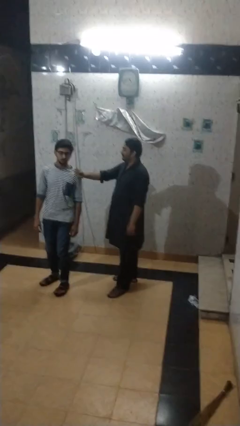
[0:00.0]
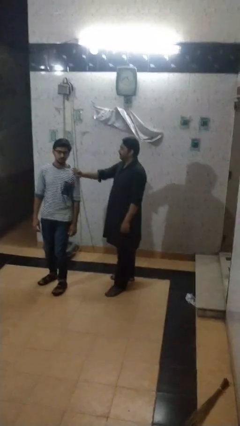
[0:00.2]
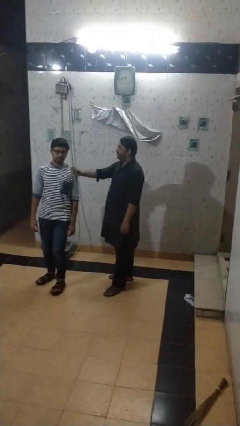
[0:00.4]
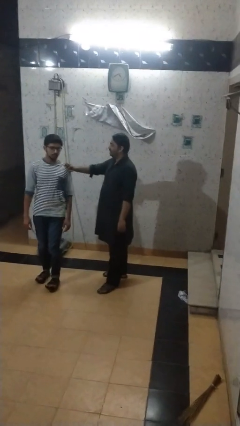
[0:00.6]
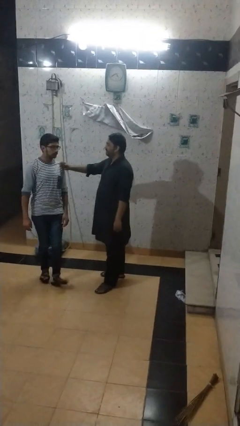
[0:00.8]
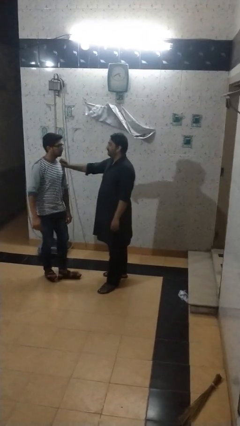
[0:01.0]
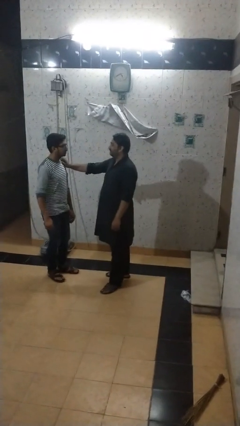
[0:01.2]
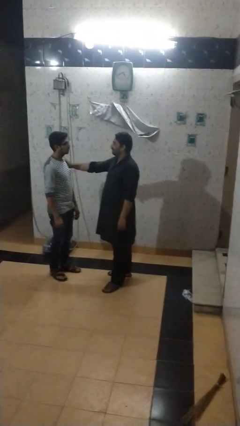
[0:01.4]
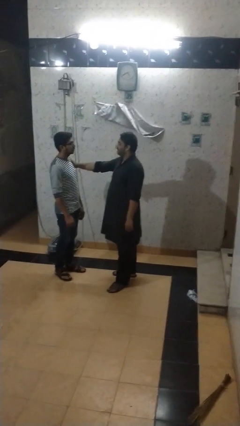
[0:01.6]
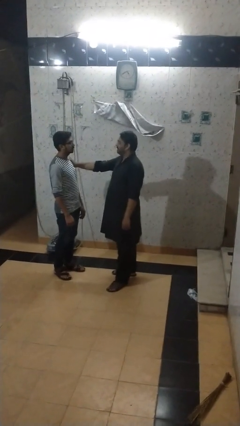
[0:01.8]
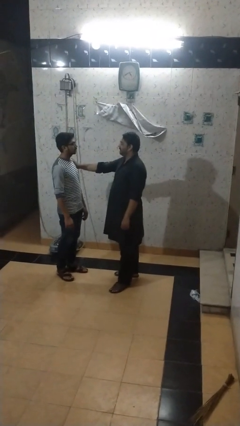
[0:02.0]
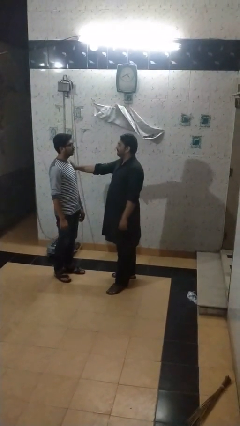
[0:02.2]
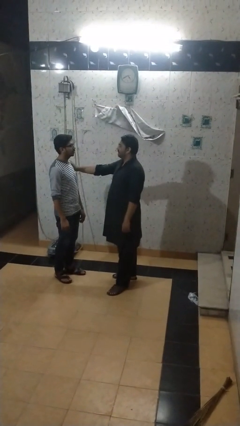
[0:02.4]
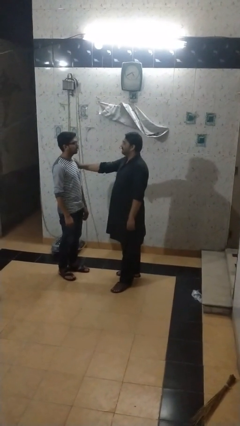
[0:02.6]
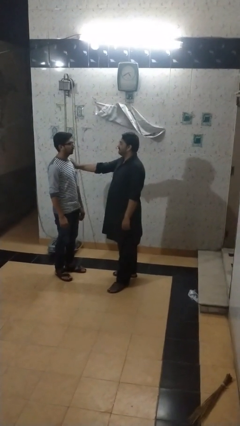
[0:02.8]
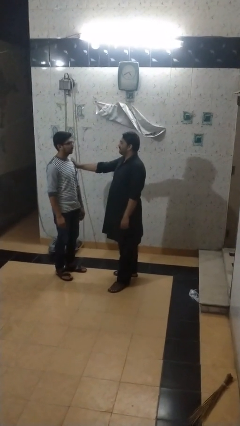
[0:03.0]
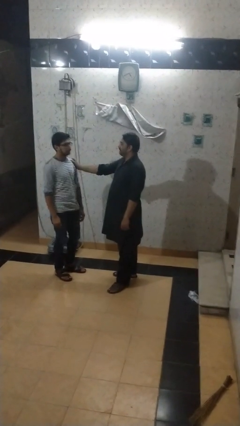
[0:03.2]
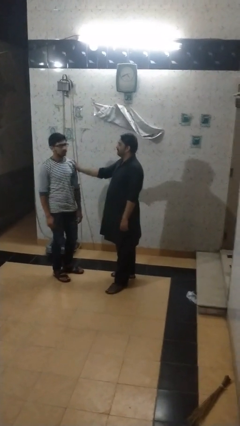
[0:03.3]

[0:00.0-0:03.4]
person spins person around

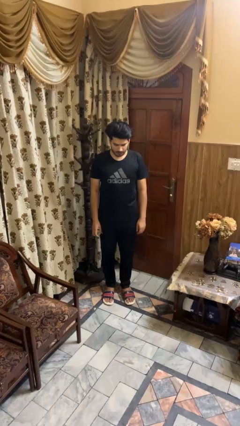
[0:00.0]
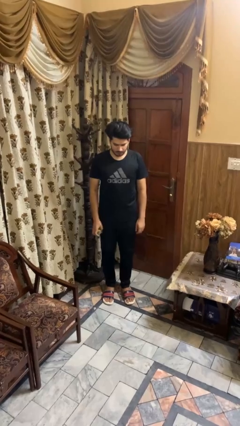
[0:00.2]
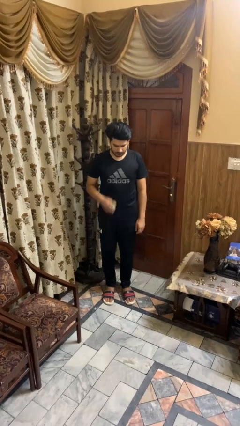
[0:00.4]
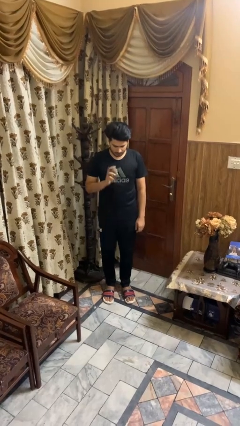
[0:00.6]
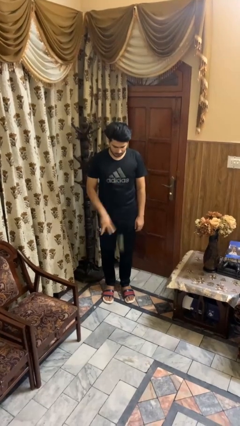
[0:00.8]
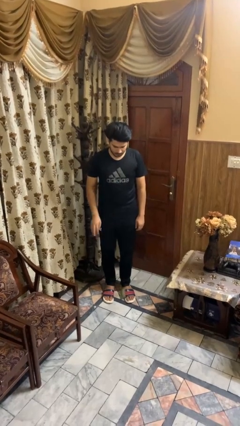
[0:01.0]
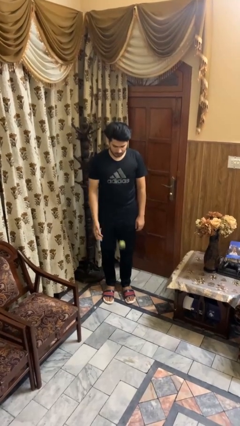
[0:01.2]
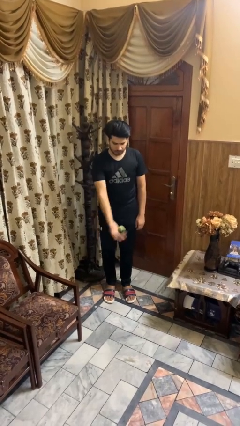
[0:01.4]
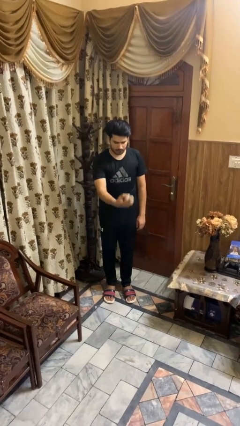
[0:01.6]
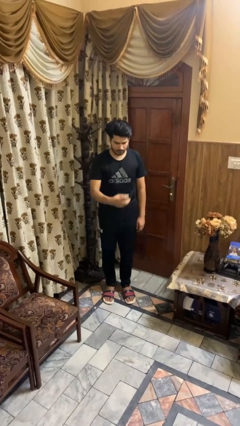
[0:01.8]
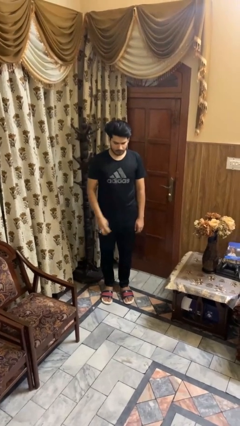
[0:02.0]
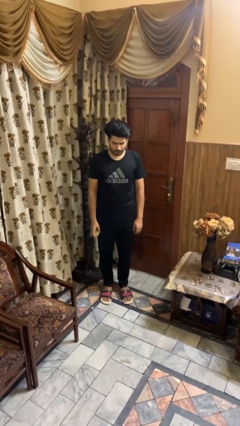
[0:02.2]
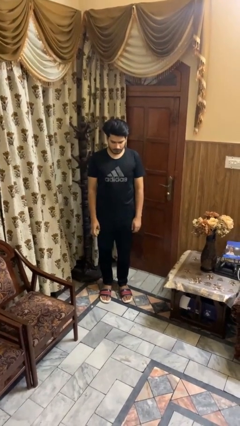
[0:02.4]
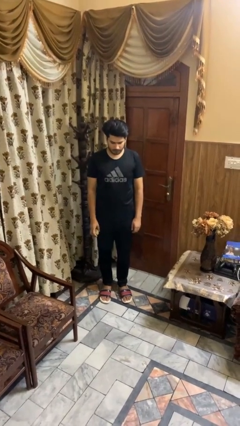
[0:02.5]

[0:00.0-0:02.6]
person bounces ball on floor

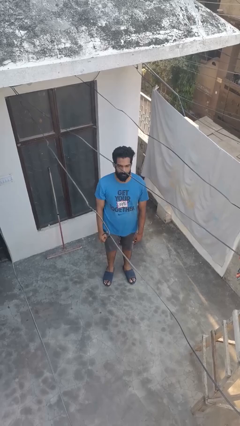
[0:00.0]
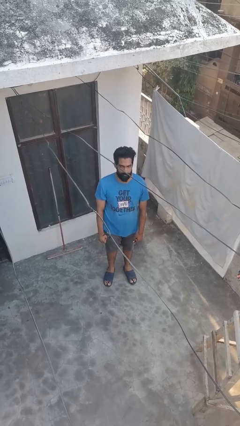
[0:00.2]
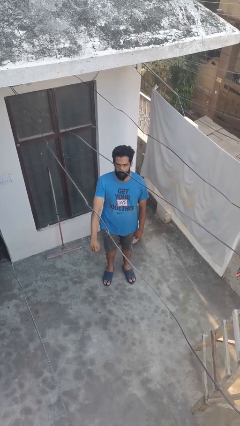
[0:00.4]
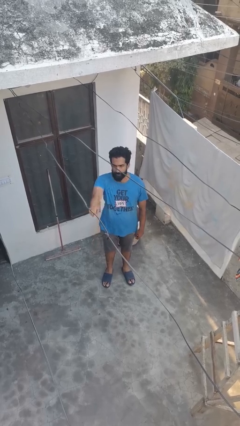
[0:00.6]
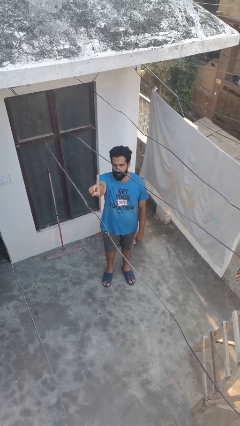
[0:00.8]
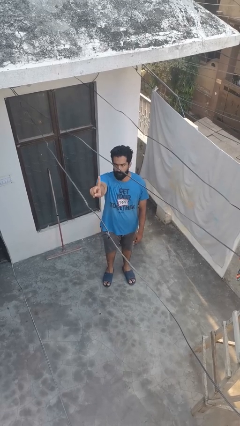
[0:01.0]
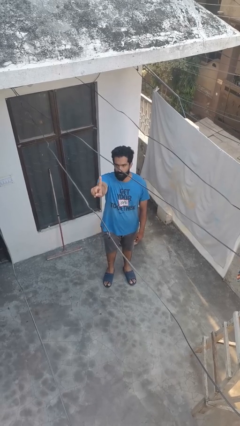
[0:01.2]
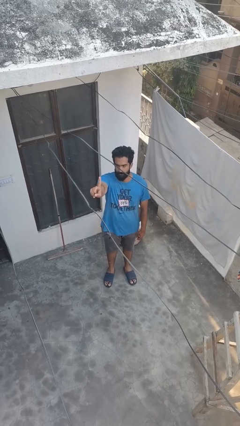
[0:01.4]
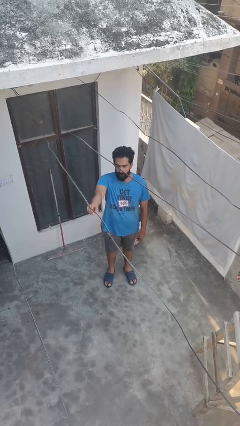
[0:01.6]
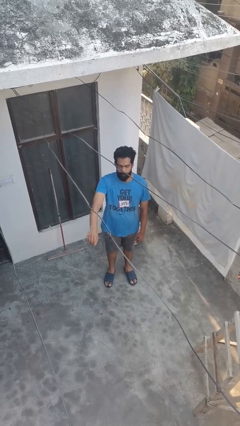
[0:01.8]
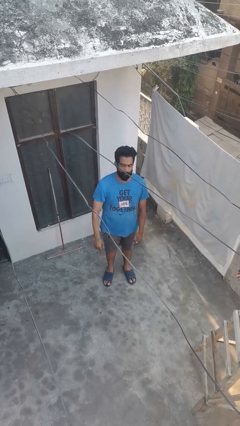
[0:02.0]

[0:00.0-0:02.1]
person gestures number one

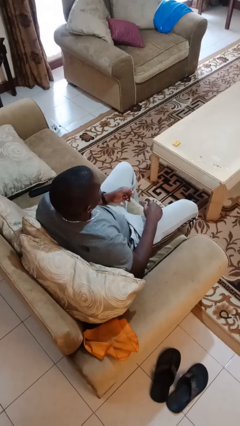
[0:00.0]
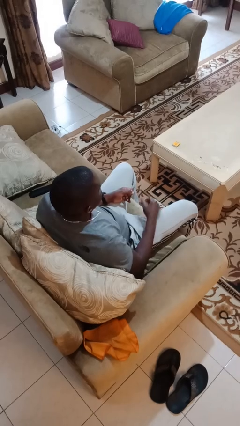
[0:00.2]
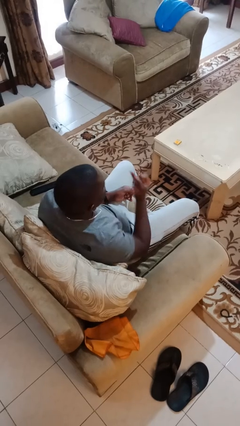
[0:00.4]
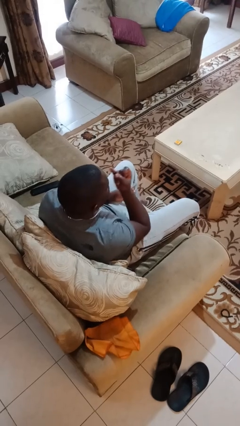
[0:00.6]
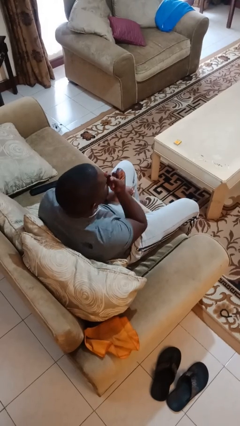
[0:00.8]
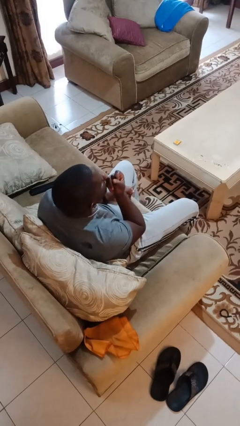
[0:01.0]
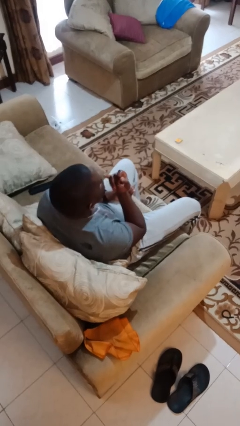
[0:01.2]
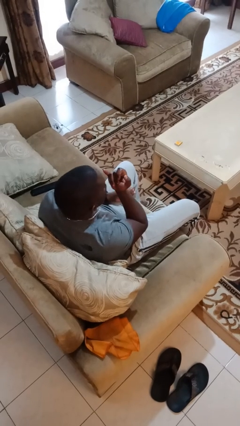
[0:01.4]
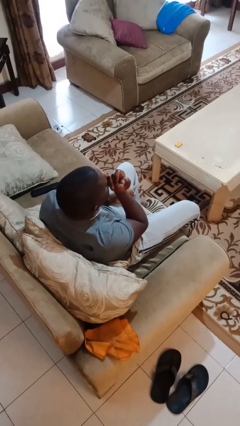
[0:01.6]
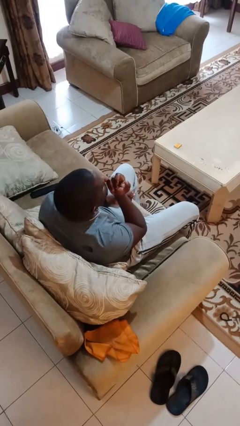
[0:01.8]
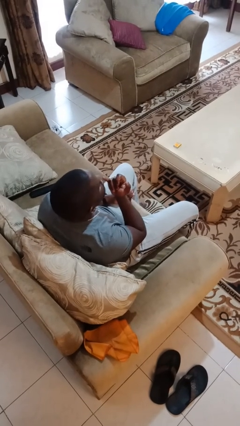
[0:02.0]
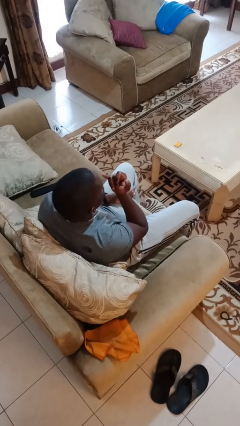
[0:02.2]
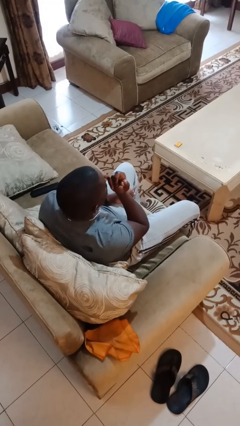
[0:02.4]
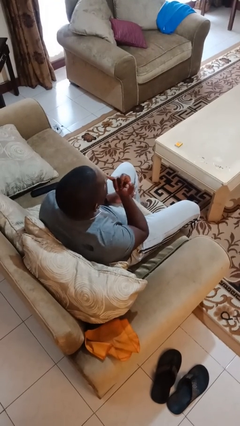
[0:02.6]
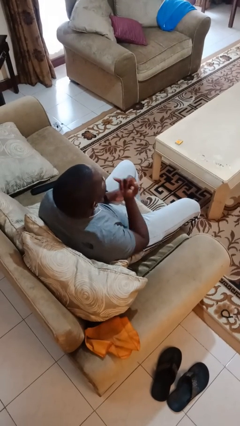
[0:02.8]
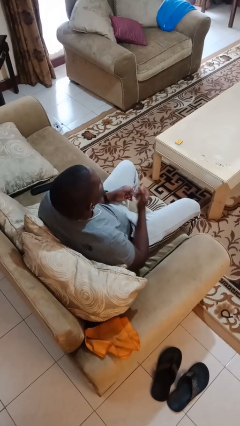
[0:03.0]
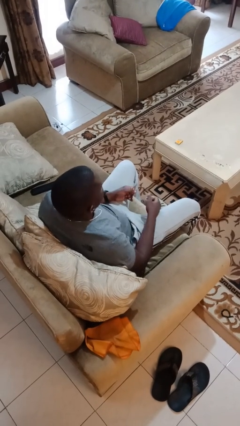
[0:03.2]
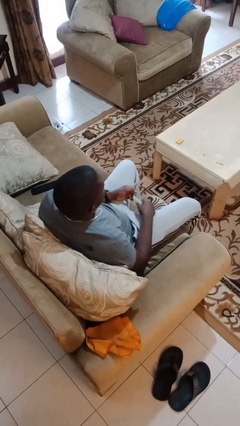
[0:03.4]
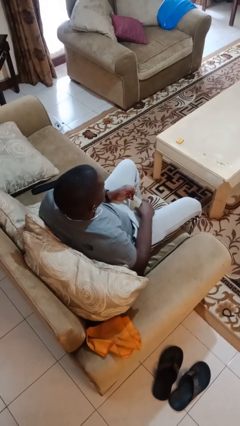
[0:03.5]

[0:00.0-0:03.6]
person licks fingers

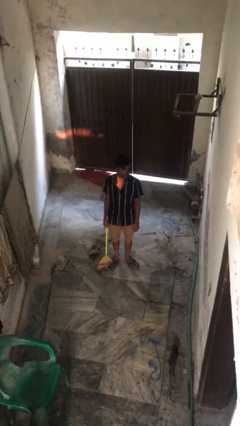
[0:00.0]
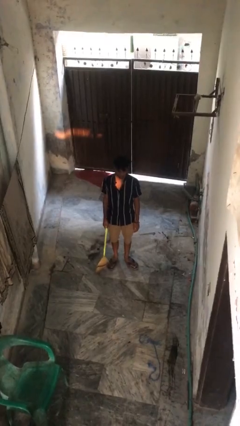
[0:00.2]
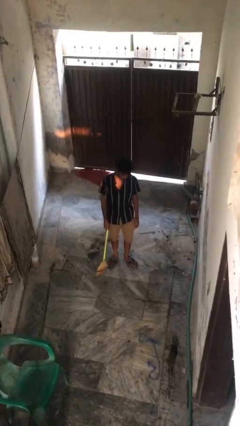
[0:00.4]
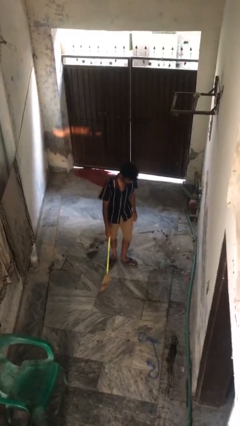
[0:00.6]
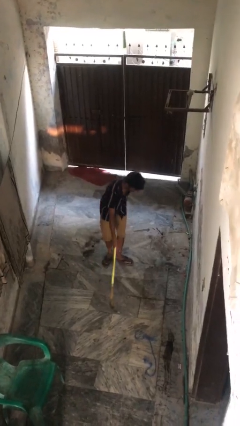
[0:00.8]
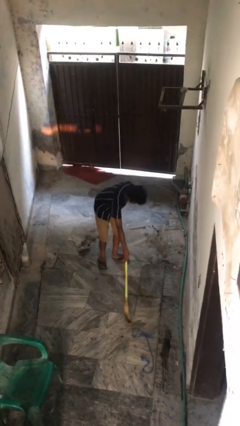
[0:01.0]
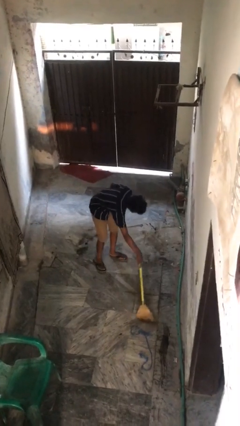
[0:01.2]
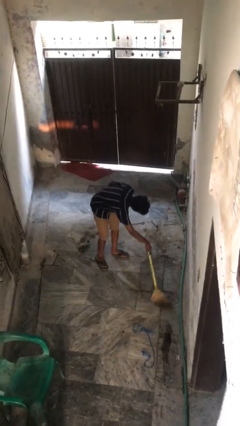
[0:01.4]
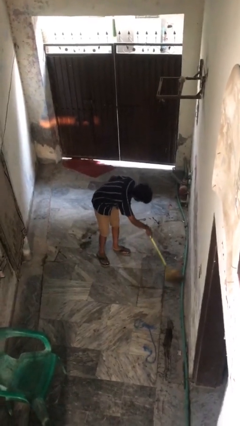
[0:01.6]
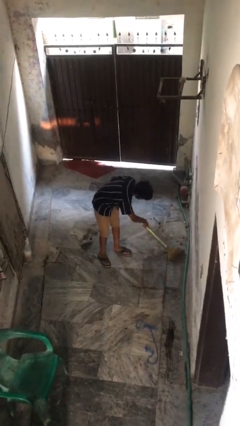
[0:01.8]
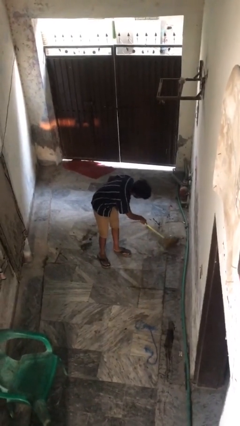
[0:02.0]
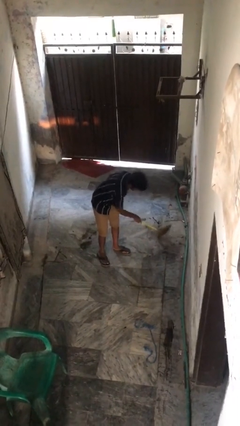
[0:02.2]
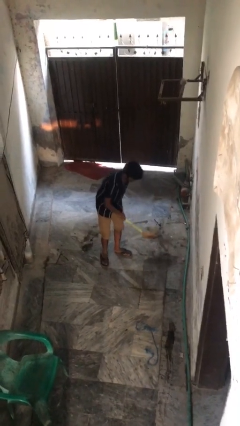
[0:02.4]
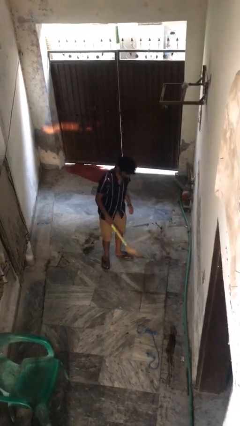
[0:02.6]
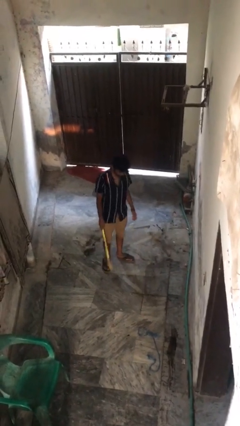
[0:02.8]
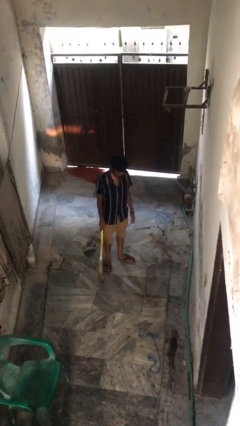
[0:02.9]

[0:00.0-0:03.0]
person sweeps floor

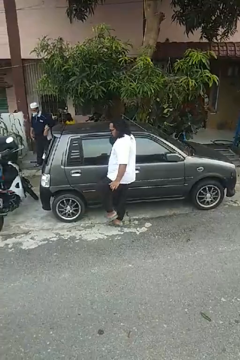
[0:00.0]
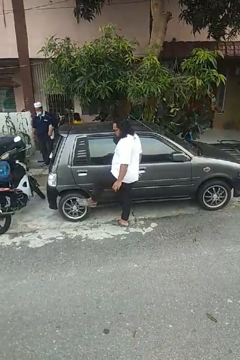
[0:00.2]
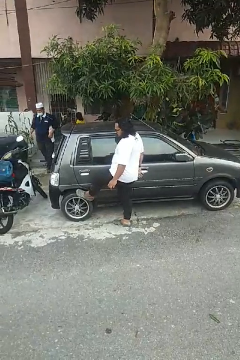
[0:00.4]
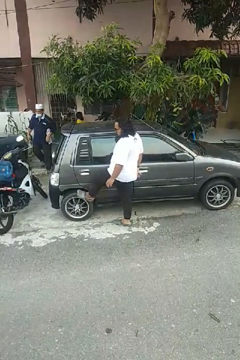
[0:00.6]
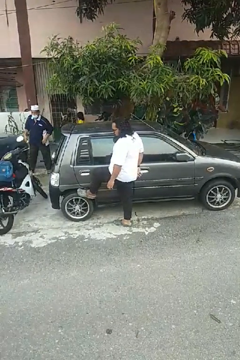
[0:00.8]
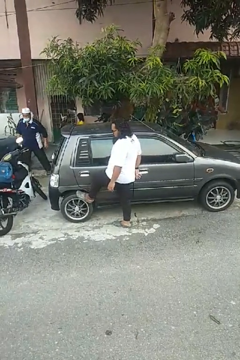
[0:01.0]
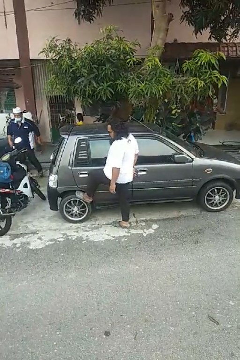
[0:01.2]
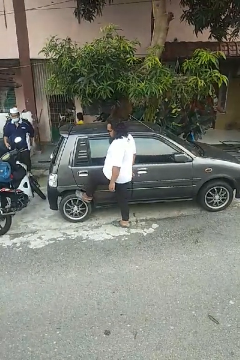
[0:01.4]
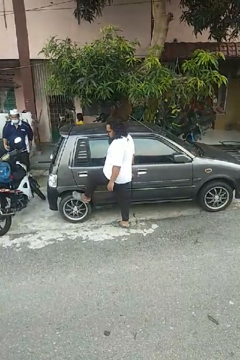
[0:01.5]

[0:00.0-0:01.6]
person kicks car tires

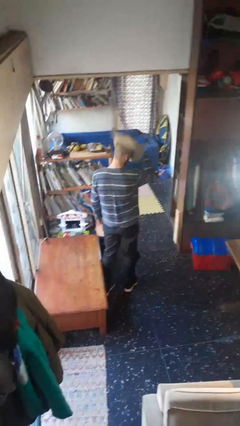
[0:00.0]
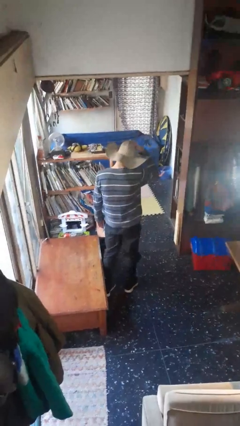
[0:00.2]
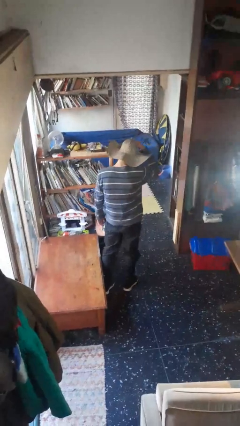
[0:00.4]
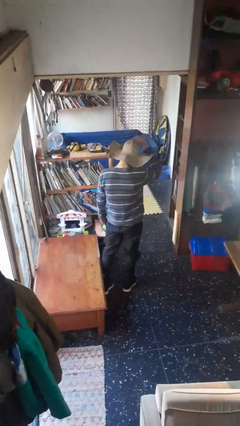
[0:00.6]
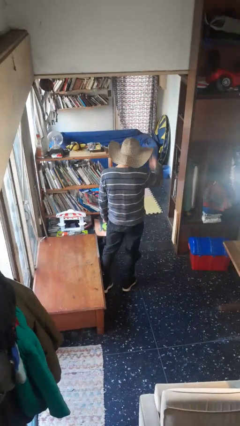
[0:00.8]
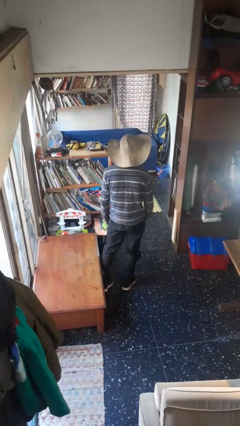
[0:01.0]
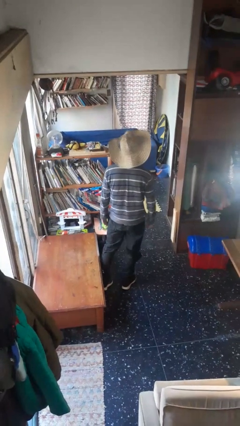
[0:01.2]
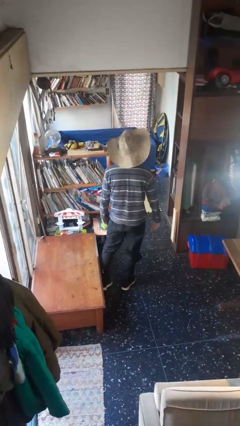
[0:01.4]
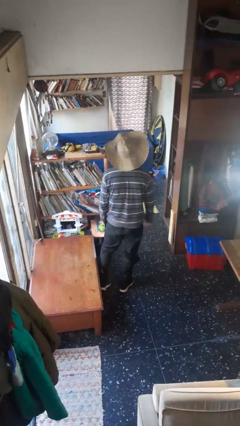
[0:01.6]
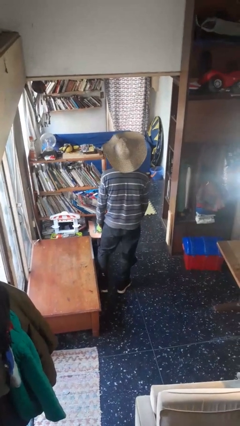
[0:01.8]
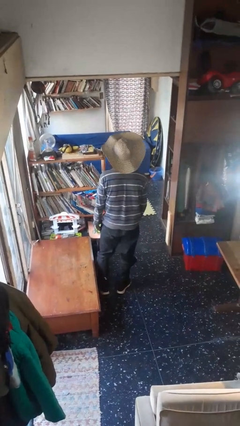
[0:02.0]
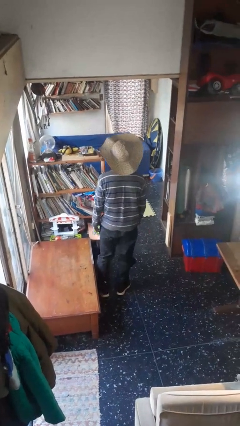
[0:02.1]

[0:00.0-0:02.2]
person puts on hat
